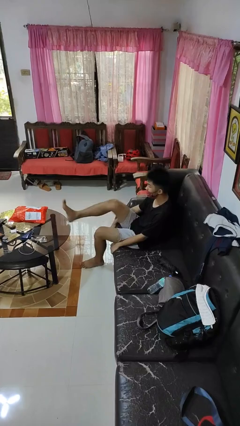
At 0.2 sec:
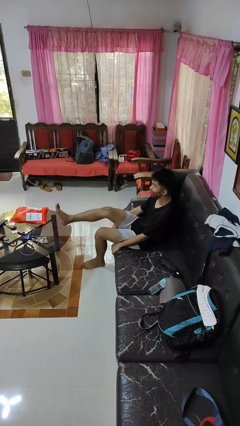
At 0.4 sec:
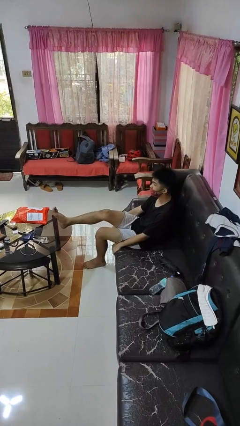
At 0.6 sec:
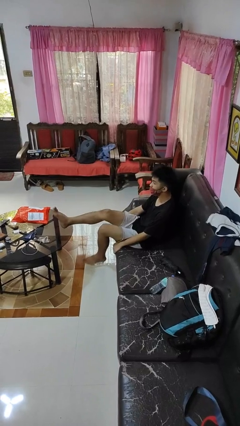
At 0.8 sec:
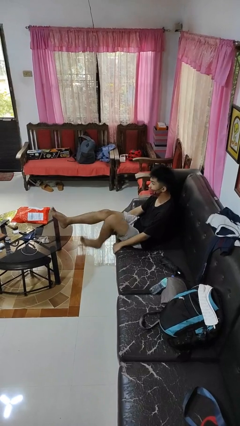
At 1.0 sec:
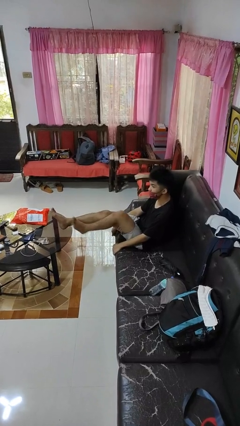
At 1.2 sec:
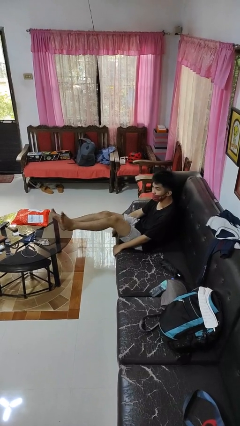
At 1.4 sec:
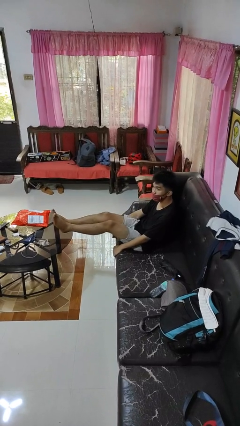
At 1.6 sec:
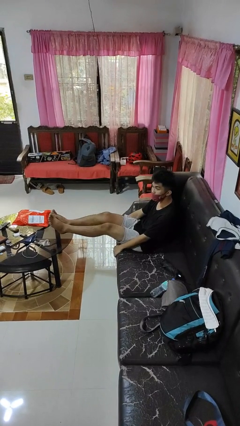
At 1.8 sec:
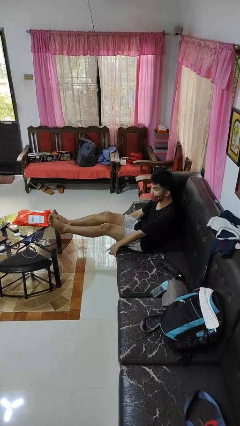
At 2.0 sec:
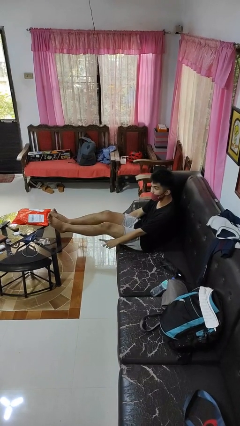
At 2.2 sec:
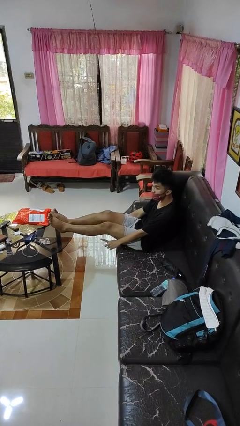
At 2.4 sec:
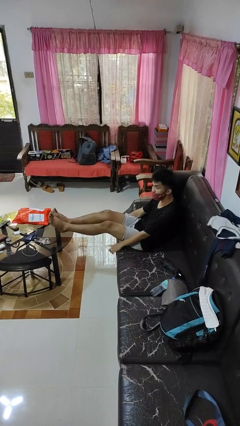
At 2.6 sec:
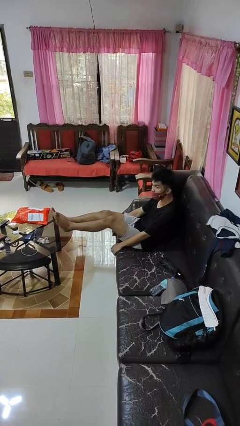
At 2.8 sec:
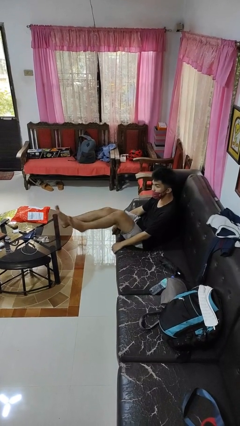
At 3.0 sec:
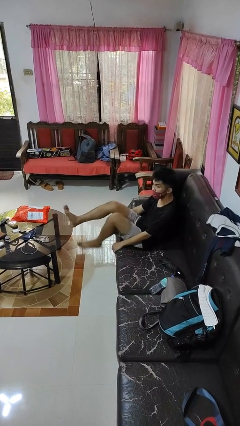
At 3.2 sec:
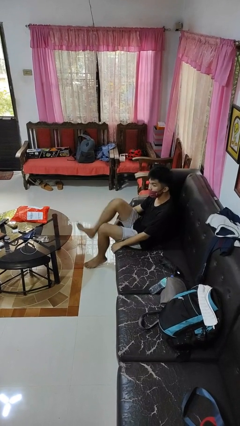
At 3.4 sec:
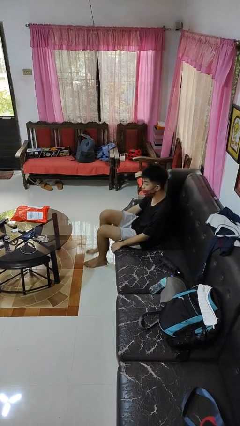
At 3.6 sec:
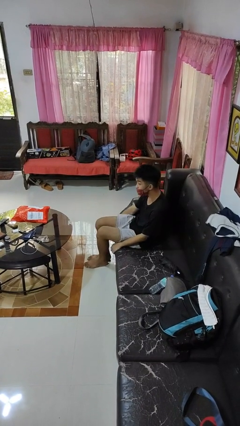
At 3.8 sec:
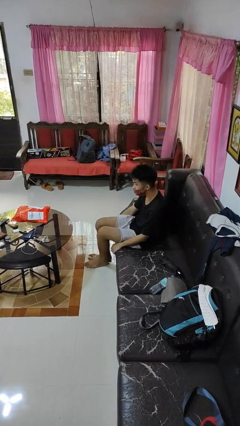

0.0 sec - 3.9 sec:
person puts feet up

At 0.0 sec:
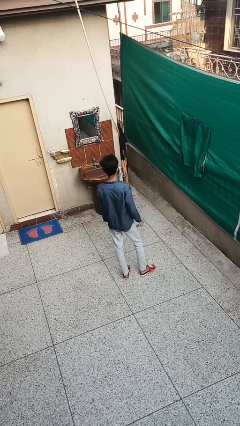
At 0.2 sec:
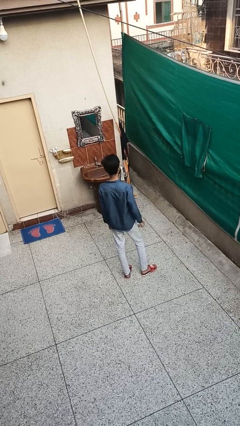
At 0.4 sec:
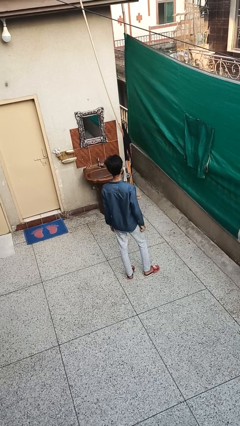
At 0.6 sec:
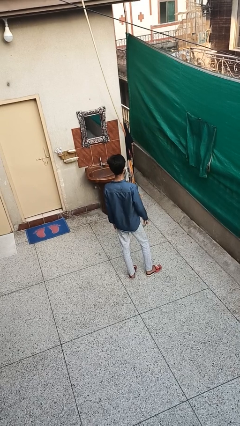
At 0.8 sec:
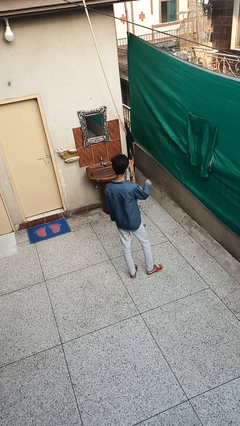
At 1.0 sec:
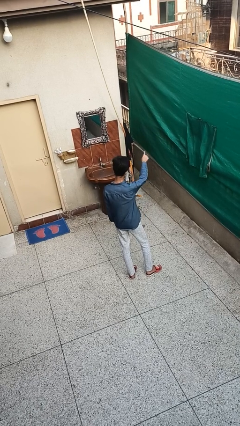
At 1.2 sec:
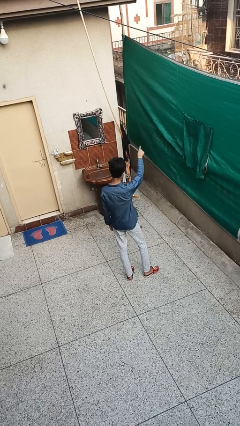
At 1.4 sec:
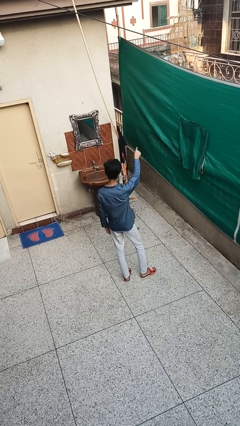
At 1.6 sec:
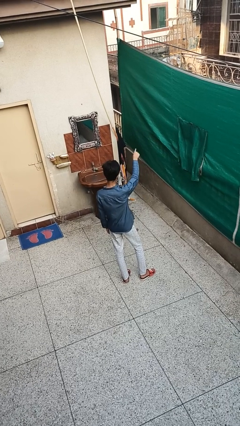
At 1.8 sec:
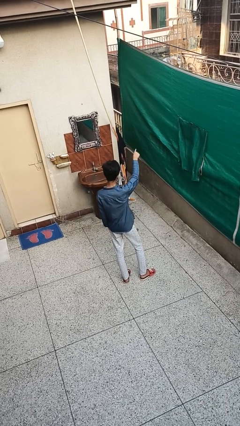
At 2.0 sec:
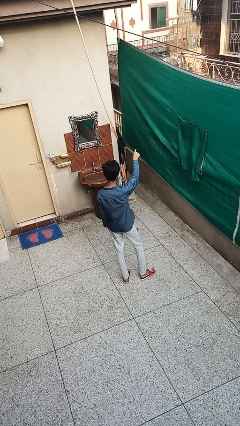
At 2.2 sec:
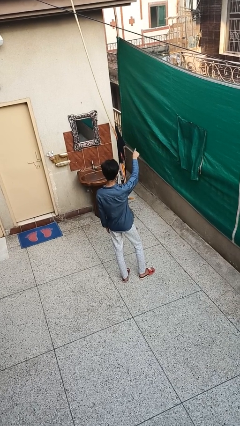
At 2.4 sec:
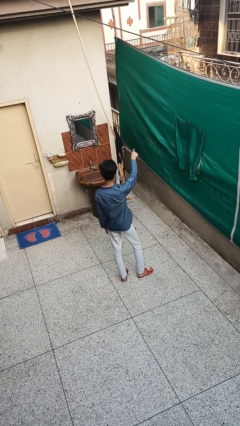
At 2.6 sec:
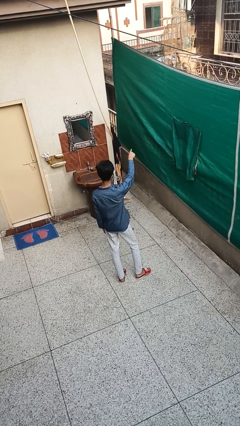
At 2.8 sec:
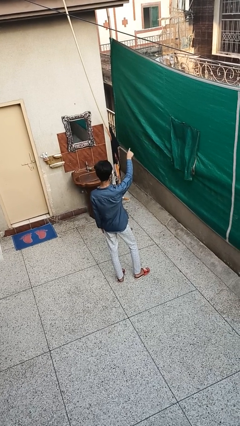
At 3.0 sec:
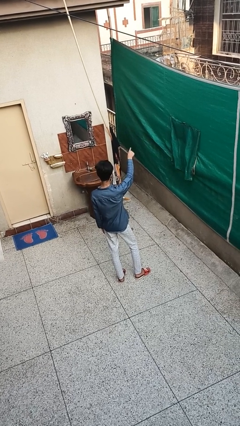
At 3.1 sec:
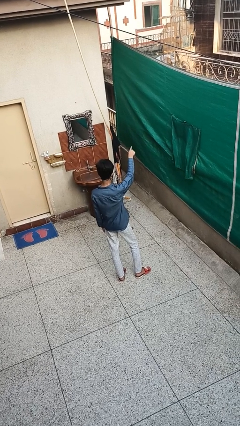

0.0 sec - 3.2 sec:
person points at person

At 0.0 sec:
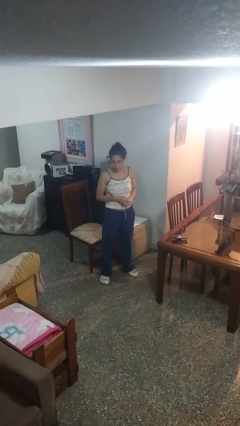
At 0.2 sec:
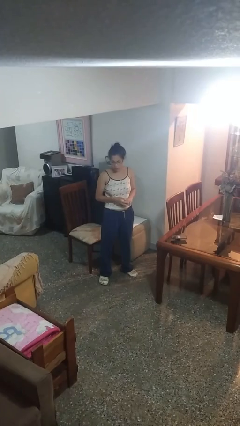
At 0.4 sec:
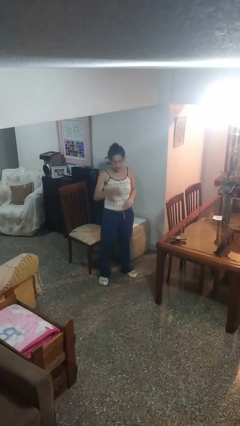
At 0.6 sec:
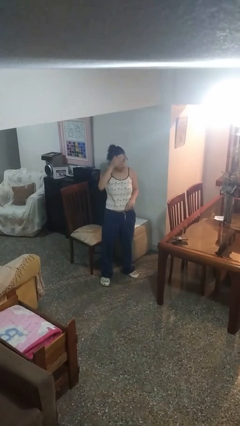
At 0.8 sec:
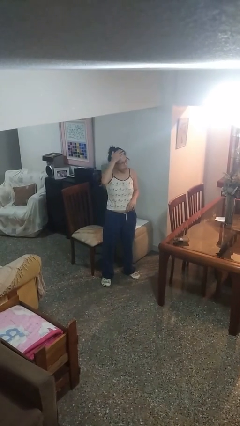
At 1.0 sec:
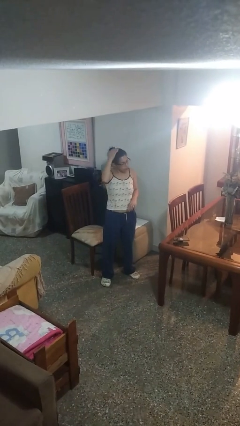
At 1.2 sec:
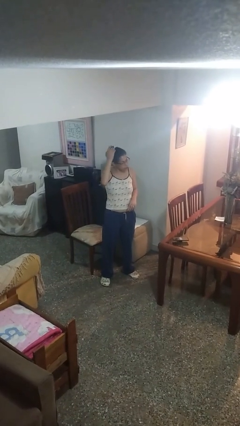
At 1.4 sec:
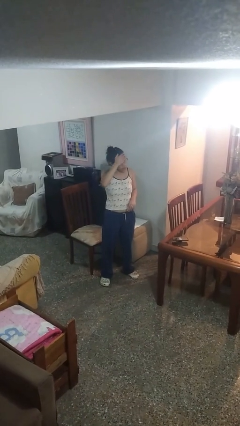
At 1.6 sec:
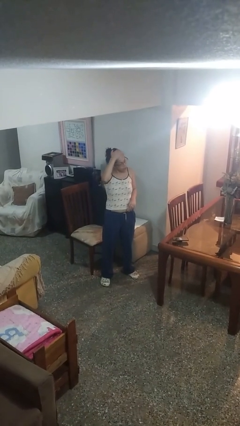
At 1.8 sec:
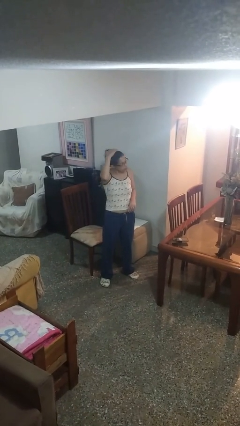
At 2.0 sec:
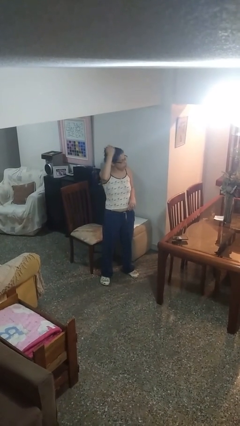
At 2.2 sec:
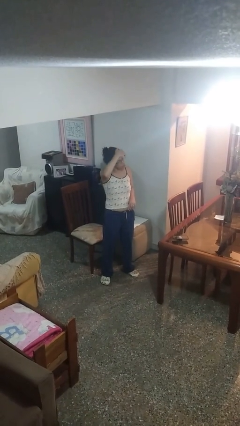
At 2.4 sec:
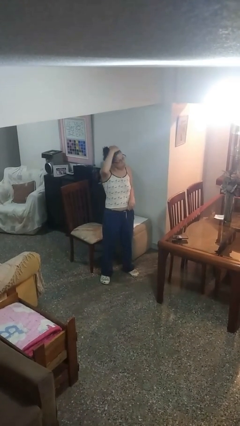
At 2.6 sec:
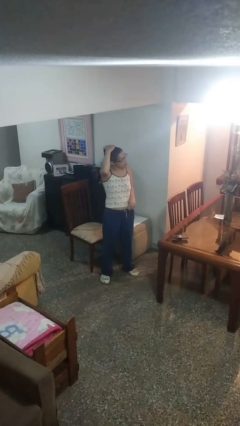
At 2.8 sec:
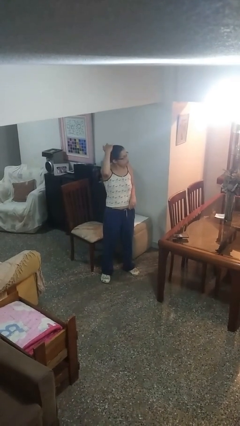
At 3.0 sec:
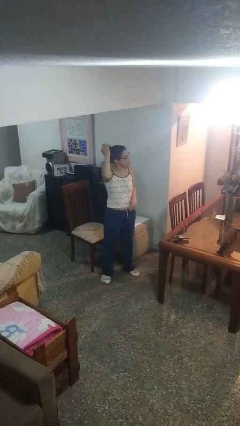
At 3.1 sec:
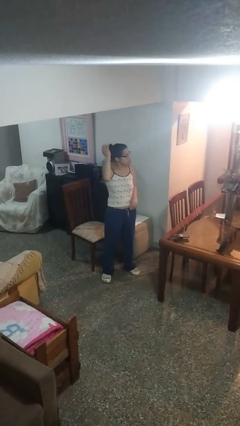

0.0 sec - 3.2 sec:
person pats head

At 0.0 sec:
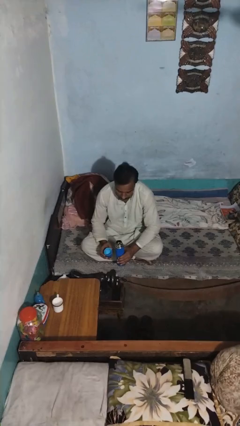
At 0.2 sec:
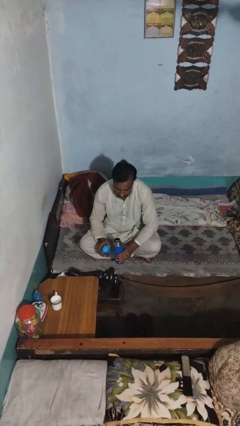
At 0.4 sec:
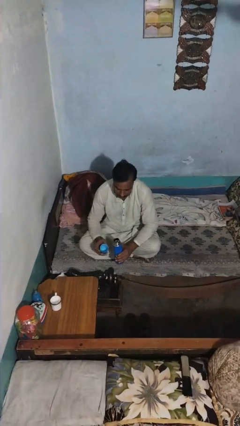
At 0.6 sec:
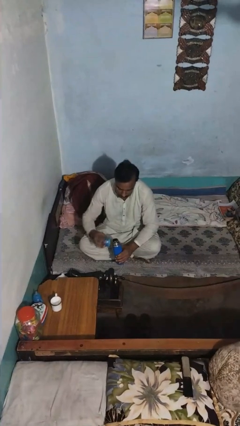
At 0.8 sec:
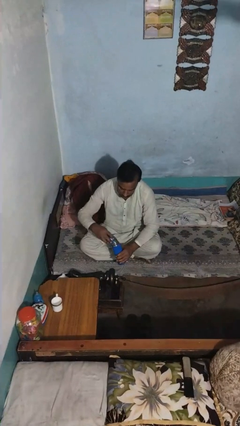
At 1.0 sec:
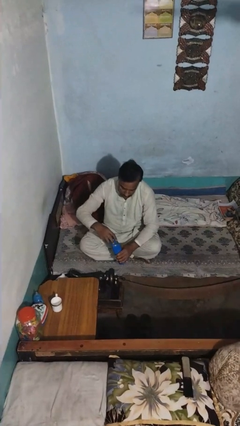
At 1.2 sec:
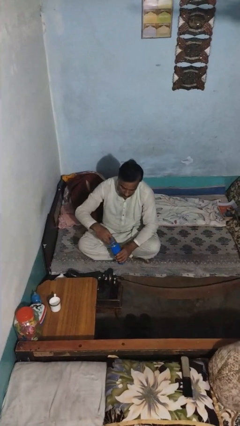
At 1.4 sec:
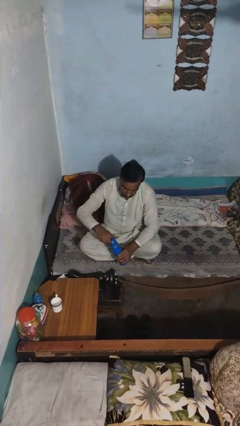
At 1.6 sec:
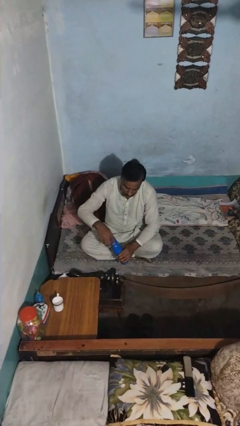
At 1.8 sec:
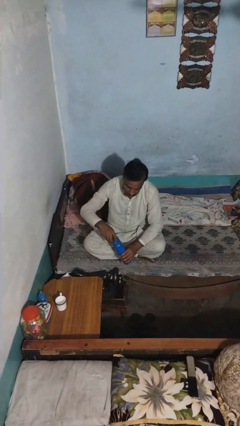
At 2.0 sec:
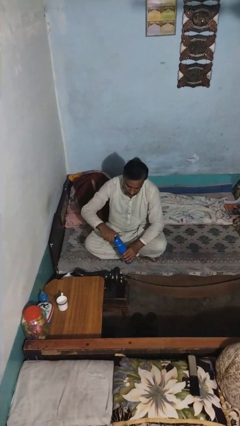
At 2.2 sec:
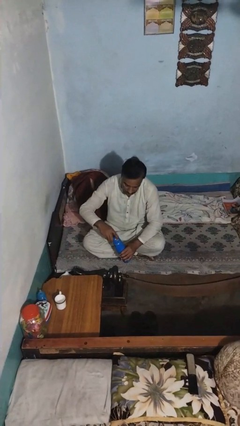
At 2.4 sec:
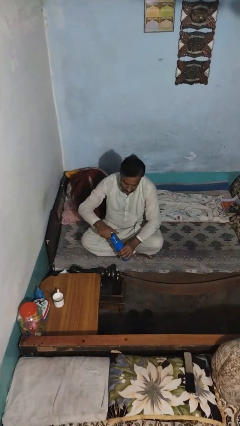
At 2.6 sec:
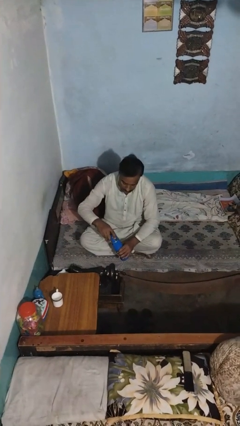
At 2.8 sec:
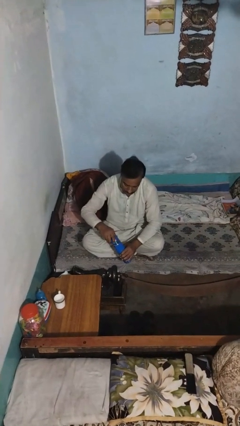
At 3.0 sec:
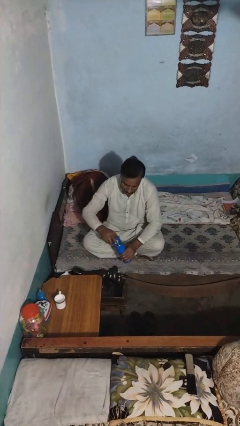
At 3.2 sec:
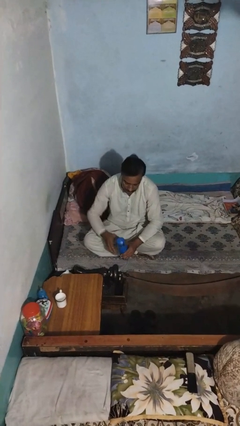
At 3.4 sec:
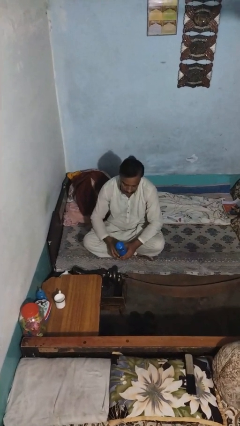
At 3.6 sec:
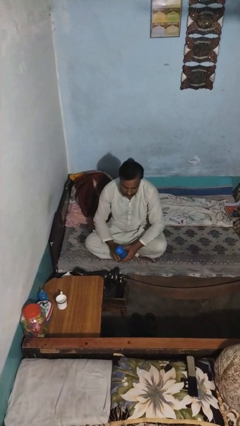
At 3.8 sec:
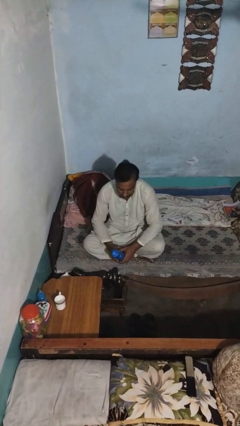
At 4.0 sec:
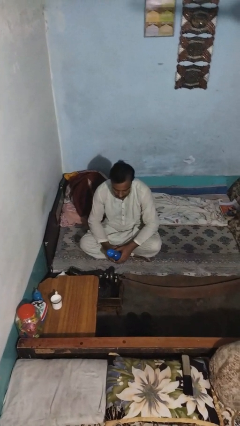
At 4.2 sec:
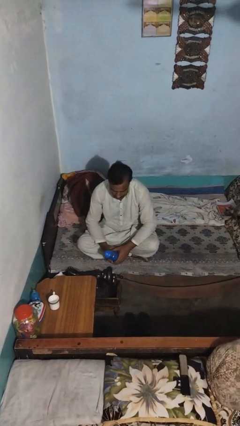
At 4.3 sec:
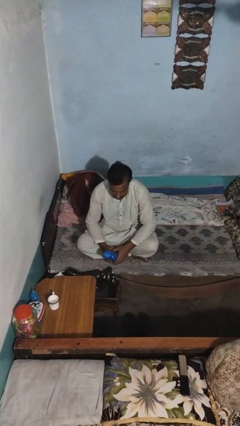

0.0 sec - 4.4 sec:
person screws lid to bottle

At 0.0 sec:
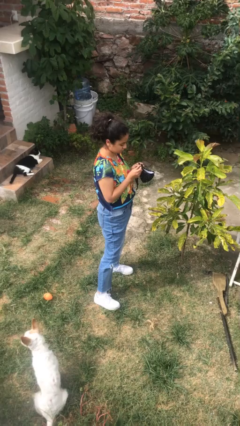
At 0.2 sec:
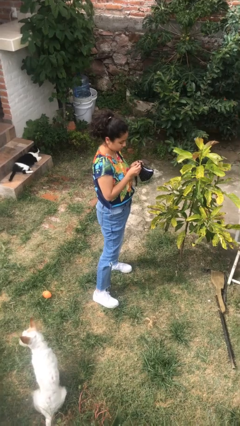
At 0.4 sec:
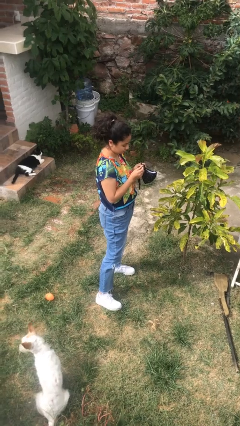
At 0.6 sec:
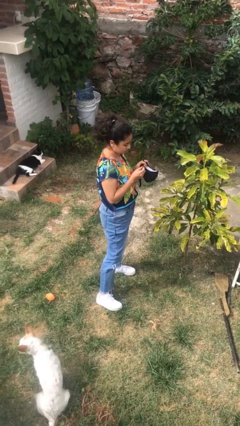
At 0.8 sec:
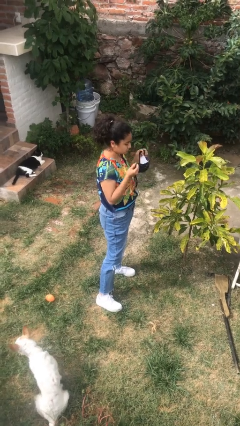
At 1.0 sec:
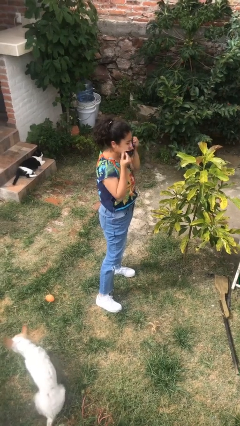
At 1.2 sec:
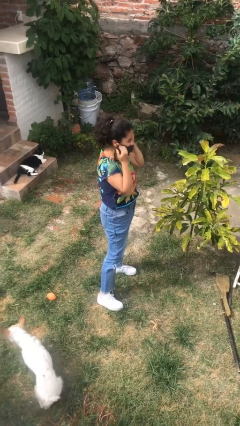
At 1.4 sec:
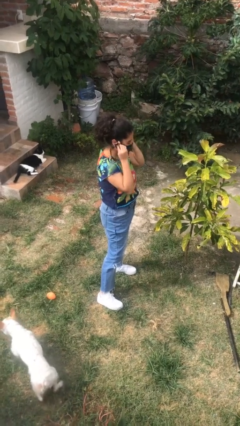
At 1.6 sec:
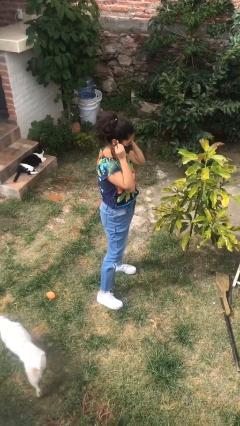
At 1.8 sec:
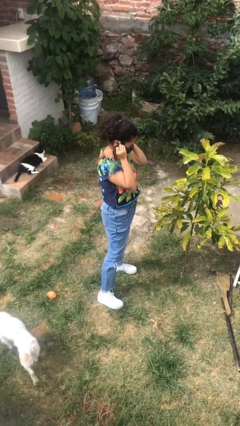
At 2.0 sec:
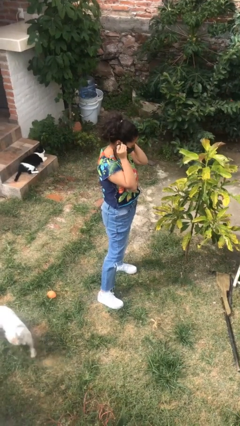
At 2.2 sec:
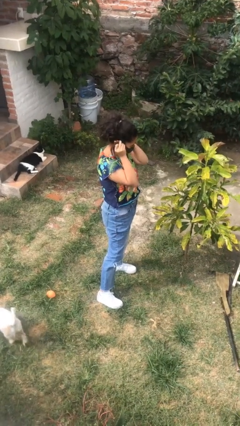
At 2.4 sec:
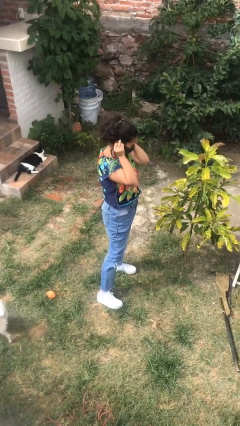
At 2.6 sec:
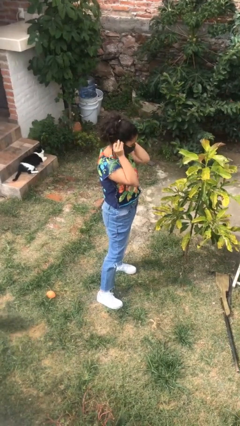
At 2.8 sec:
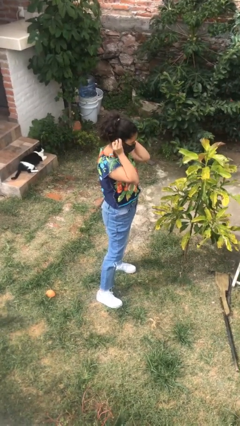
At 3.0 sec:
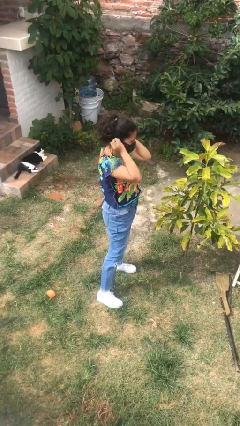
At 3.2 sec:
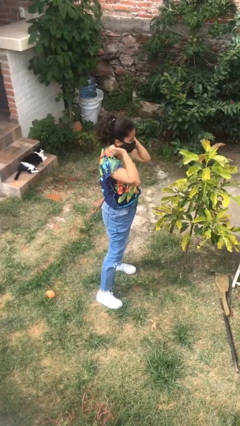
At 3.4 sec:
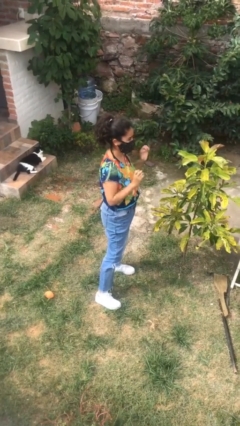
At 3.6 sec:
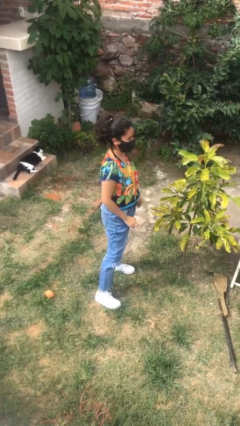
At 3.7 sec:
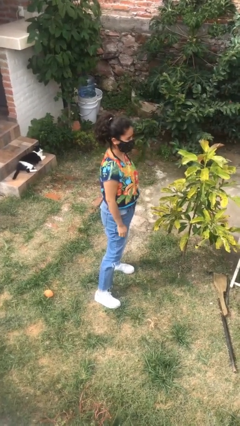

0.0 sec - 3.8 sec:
person puts on facemask
